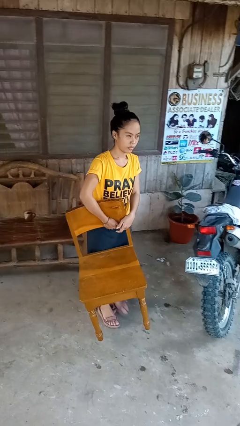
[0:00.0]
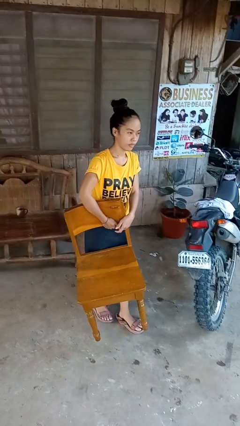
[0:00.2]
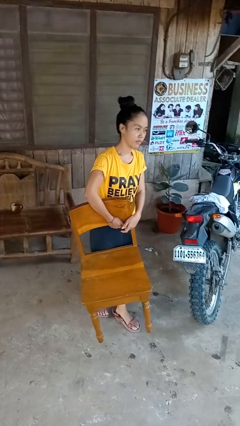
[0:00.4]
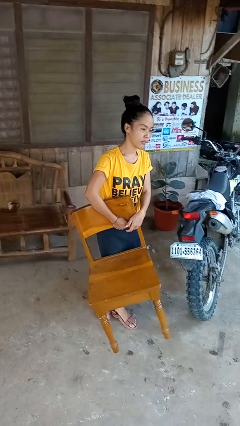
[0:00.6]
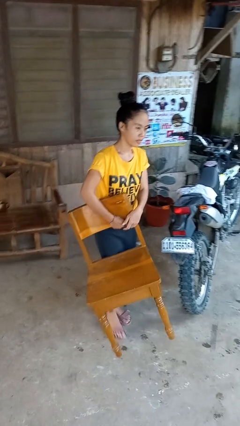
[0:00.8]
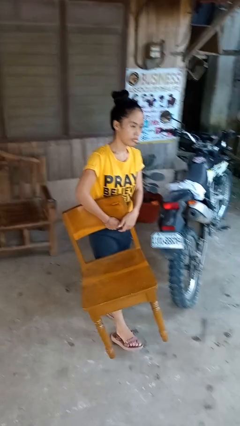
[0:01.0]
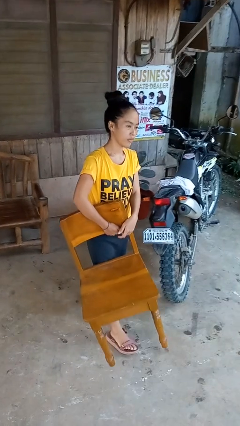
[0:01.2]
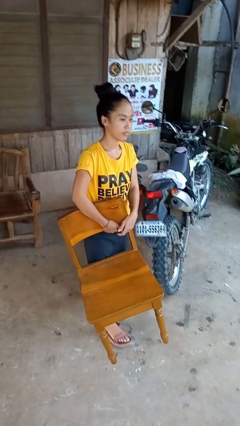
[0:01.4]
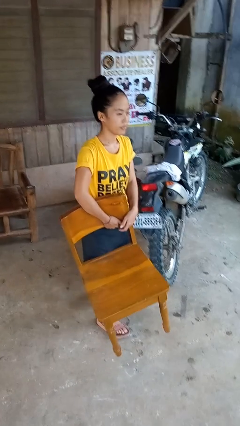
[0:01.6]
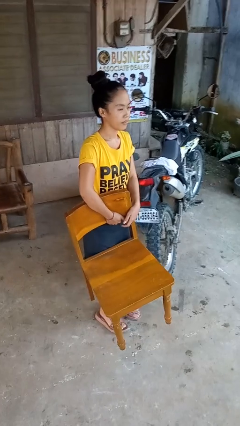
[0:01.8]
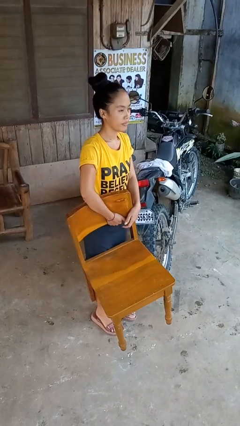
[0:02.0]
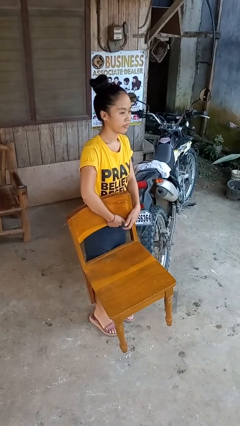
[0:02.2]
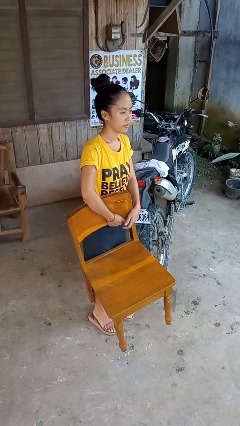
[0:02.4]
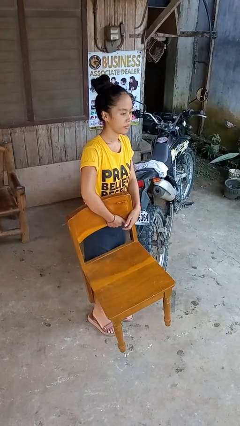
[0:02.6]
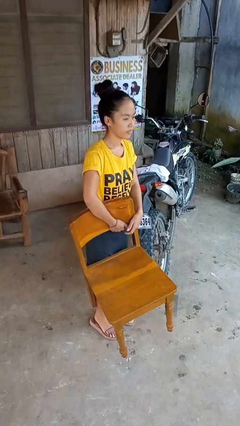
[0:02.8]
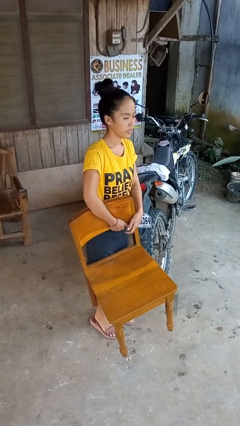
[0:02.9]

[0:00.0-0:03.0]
person carries furniture

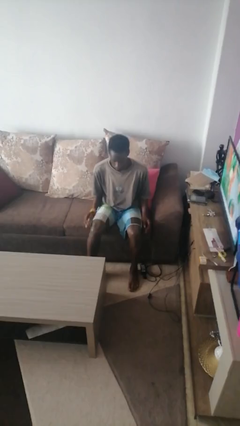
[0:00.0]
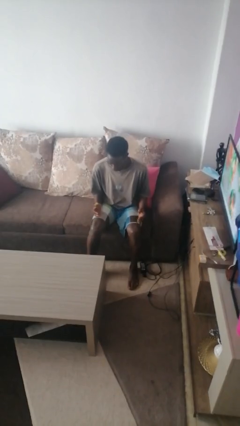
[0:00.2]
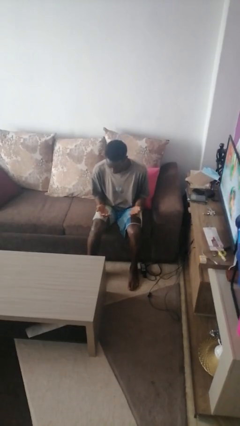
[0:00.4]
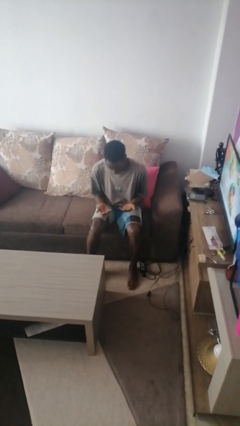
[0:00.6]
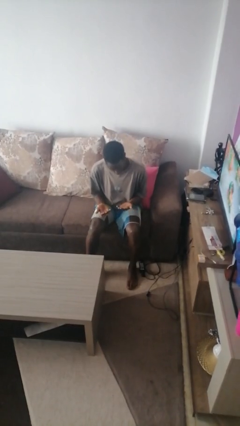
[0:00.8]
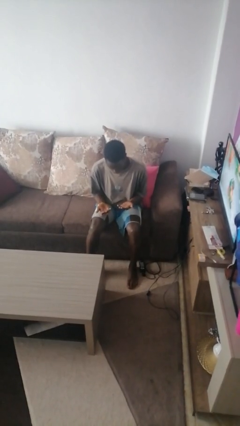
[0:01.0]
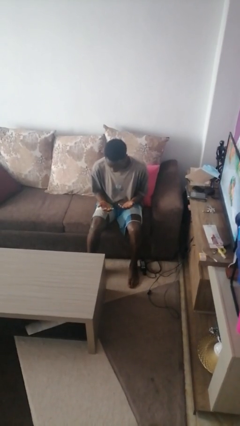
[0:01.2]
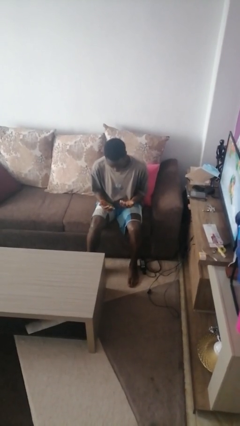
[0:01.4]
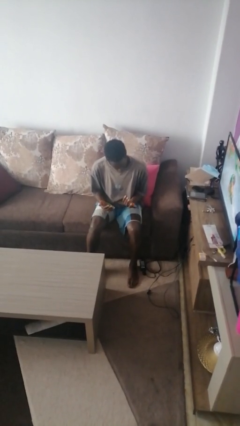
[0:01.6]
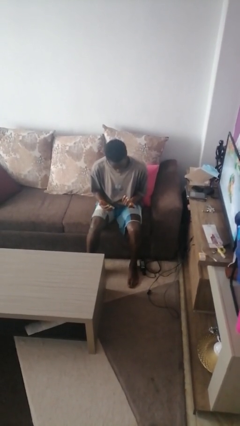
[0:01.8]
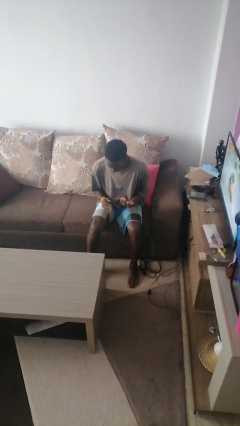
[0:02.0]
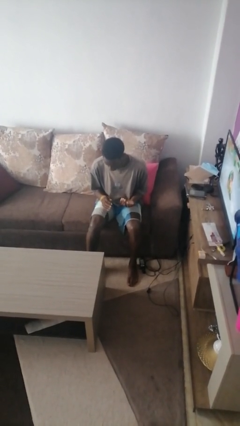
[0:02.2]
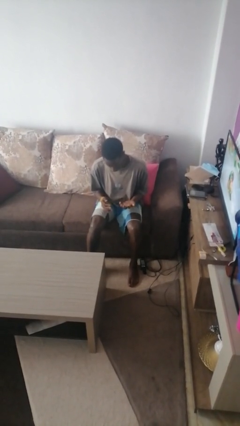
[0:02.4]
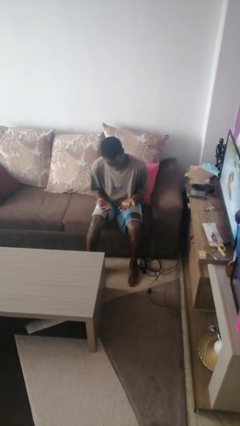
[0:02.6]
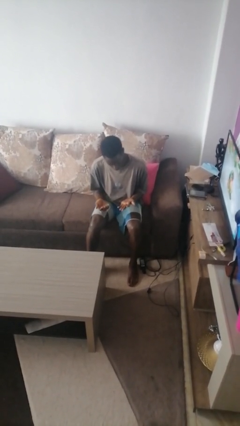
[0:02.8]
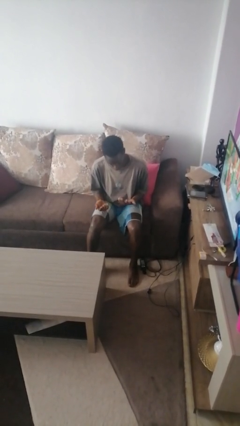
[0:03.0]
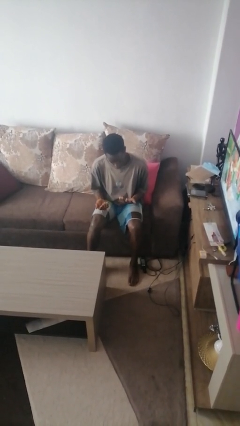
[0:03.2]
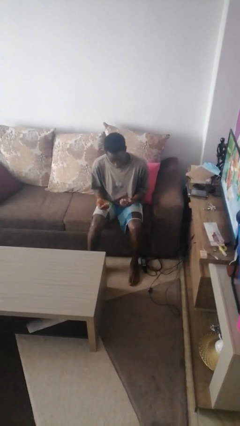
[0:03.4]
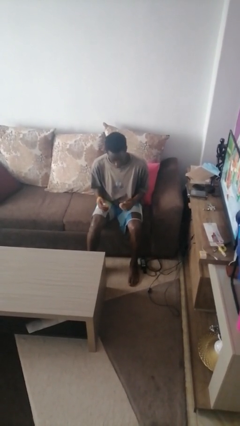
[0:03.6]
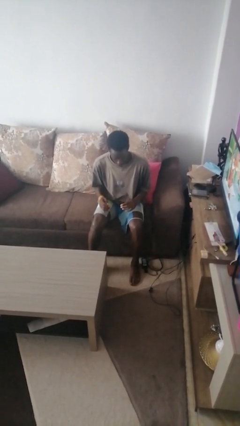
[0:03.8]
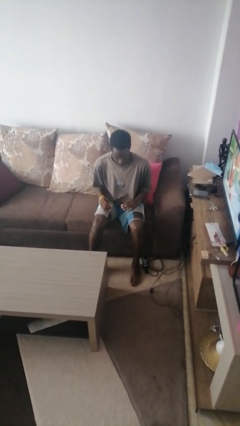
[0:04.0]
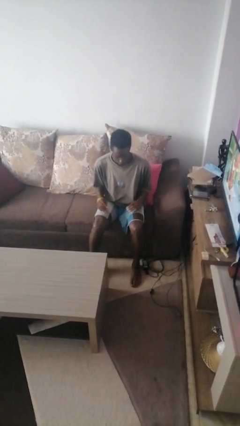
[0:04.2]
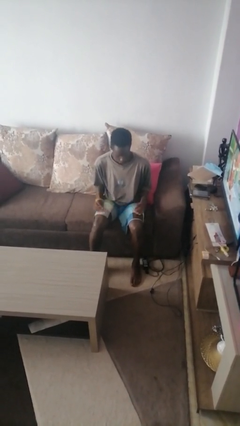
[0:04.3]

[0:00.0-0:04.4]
person looks at hands in lap

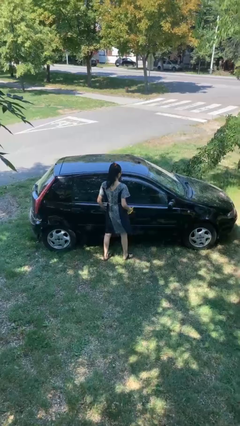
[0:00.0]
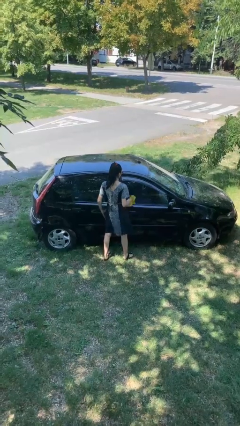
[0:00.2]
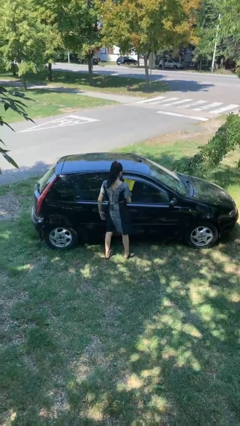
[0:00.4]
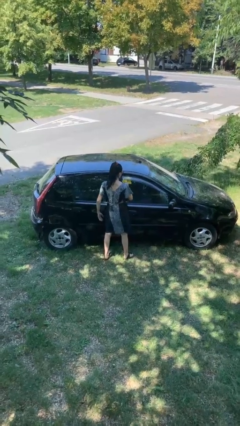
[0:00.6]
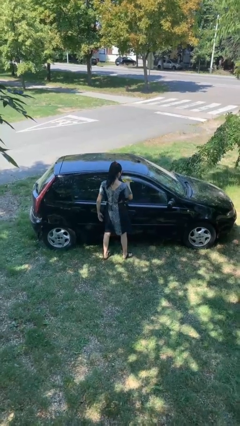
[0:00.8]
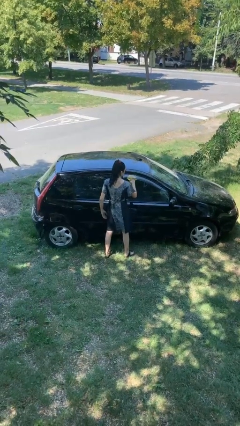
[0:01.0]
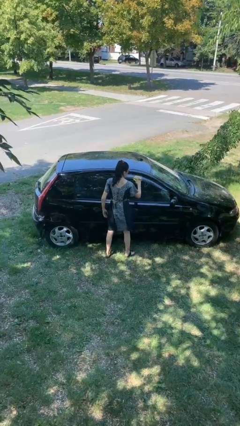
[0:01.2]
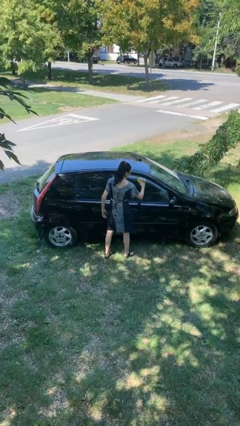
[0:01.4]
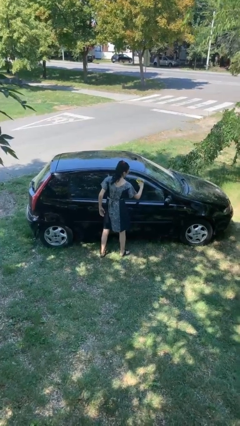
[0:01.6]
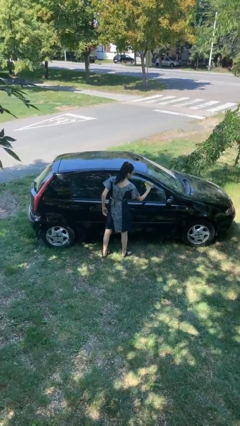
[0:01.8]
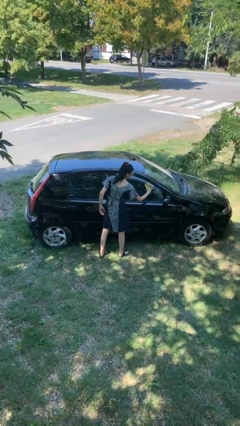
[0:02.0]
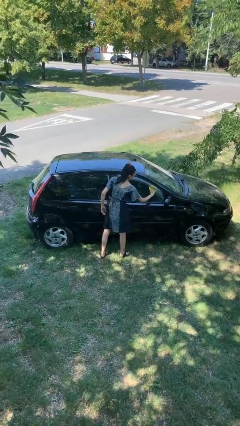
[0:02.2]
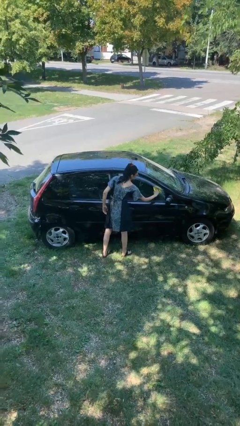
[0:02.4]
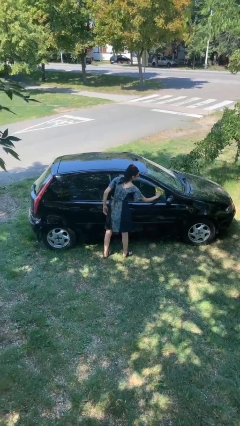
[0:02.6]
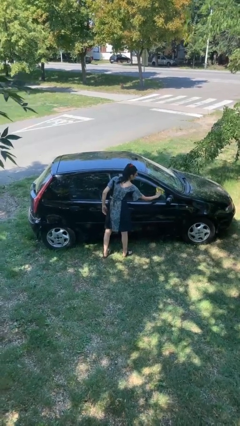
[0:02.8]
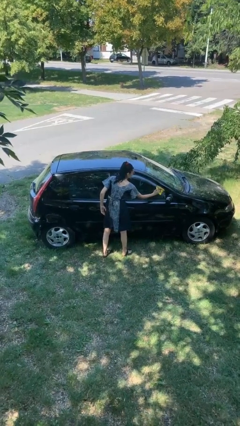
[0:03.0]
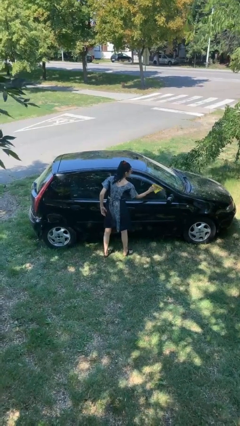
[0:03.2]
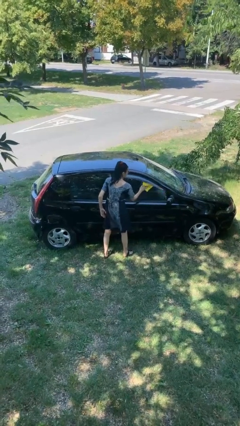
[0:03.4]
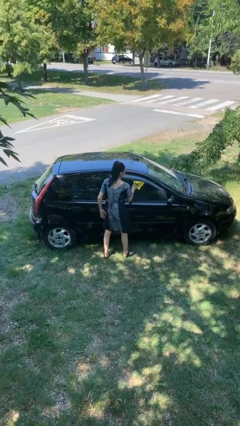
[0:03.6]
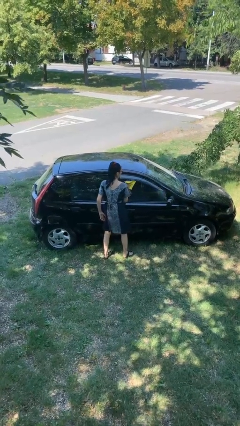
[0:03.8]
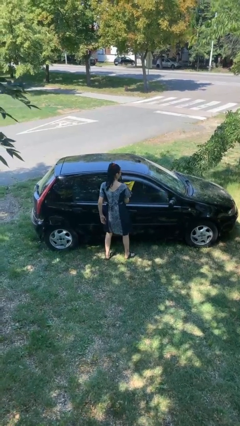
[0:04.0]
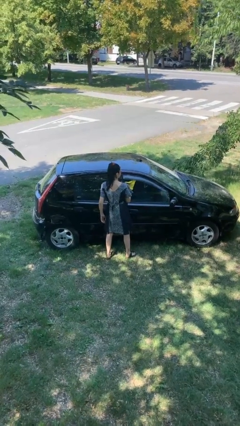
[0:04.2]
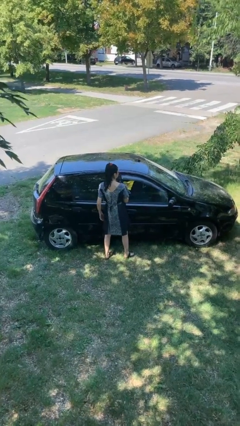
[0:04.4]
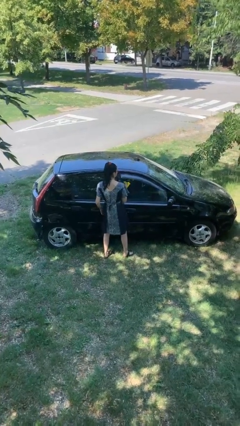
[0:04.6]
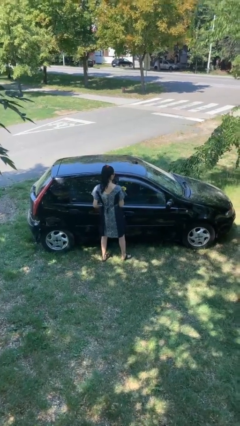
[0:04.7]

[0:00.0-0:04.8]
person polishes car with rag

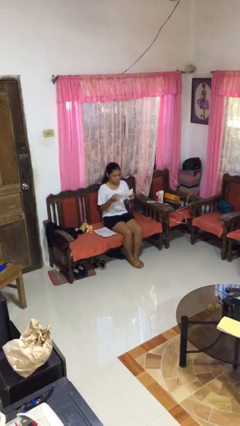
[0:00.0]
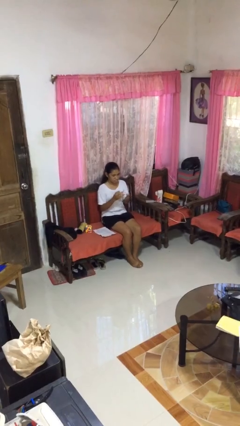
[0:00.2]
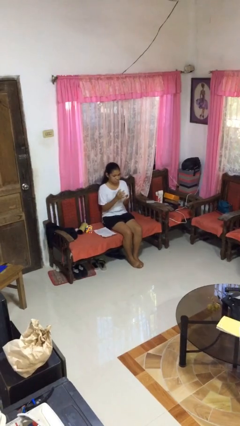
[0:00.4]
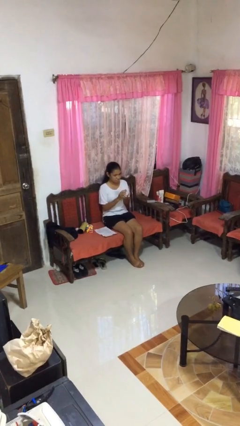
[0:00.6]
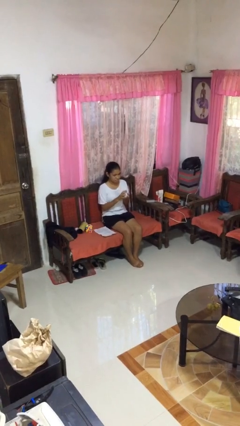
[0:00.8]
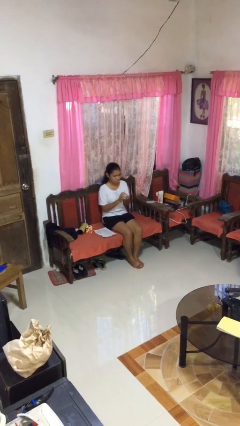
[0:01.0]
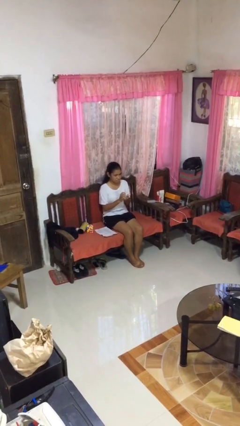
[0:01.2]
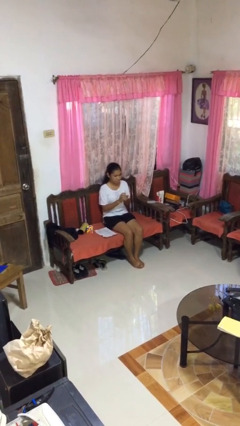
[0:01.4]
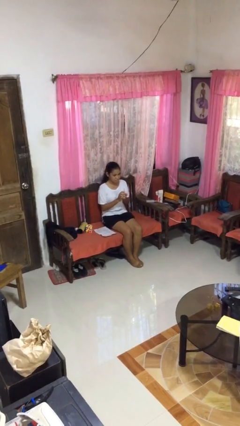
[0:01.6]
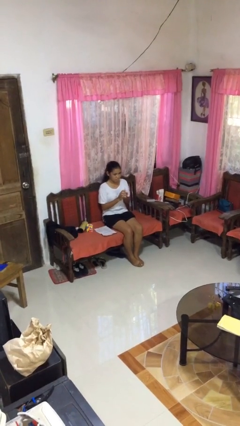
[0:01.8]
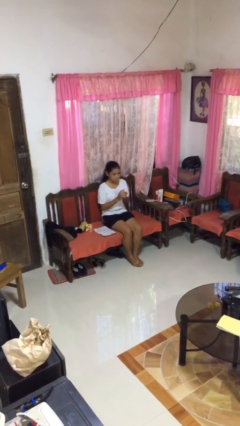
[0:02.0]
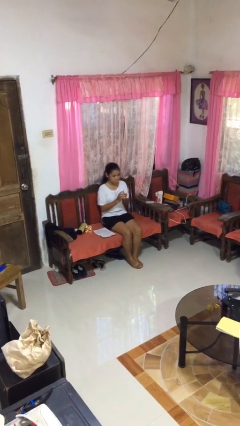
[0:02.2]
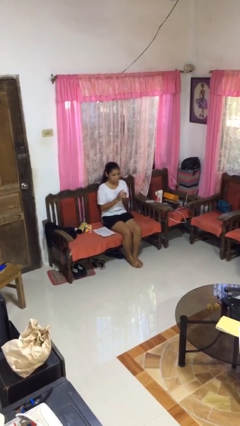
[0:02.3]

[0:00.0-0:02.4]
person crumples paper

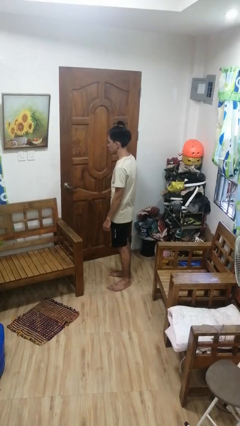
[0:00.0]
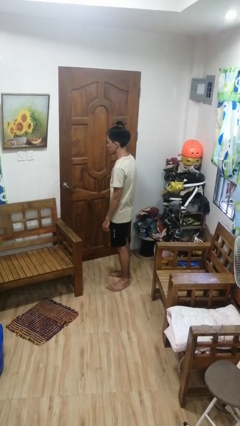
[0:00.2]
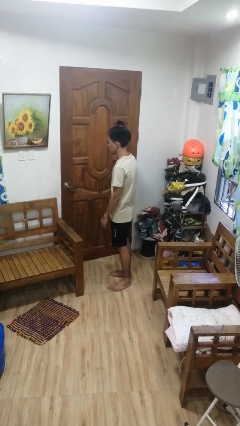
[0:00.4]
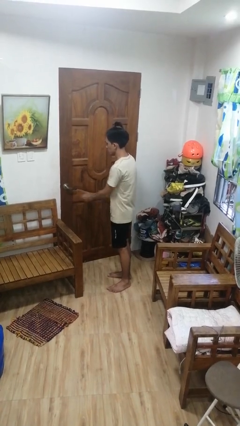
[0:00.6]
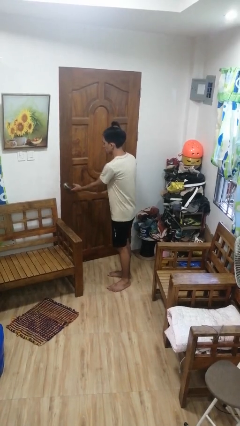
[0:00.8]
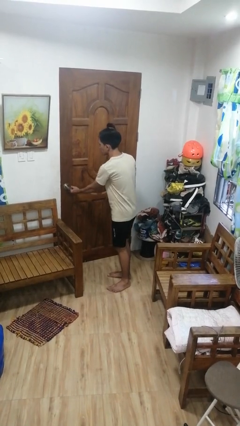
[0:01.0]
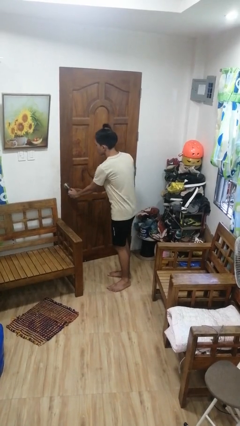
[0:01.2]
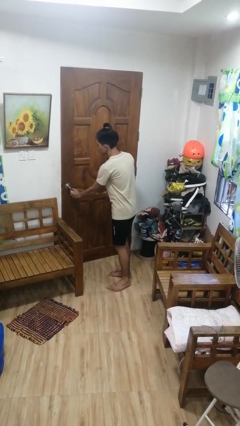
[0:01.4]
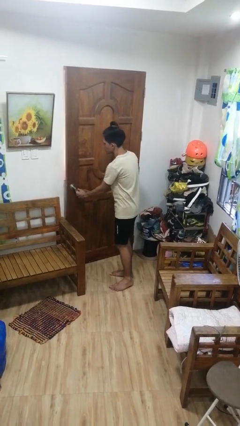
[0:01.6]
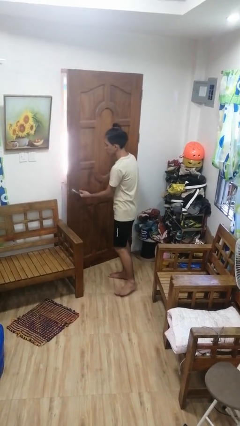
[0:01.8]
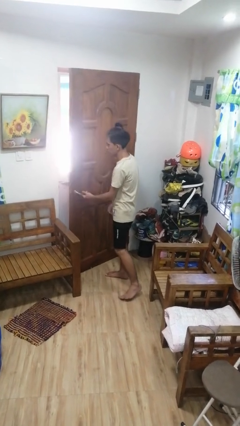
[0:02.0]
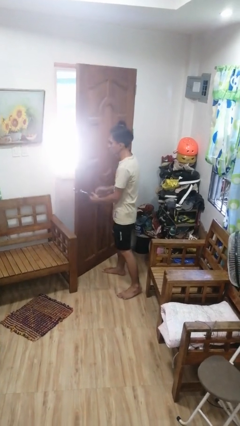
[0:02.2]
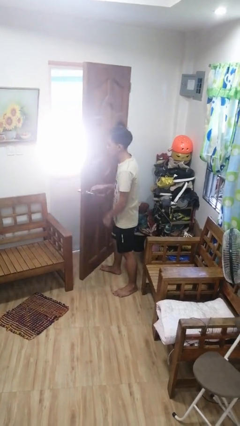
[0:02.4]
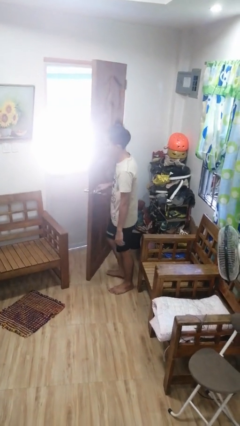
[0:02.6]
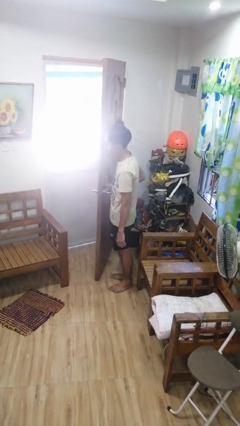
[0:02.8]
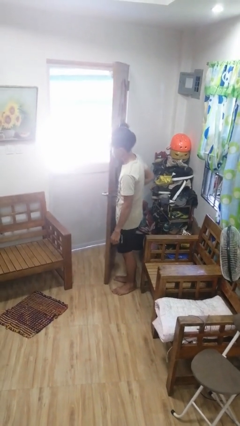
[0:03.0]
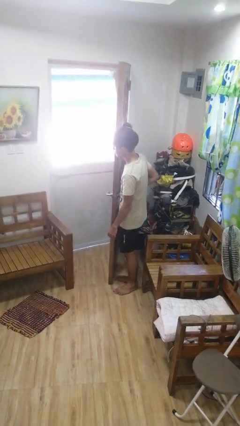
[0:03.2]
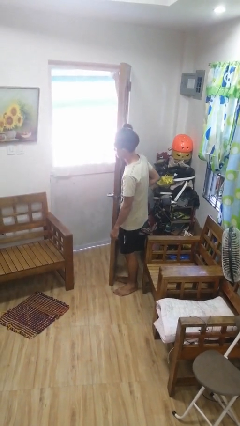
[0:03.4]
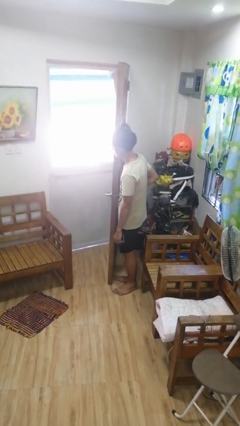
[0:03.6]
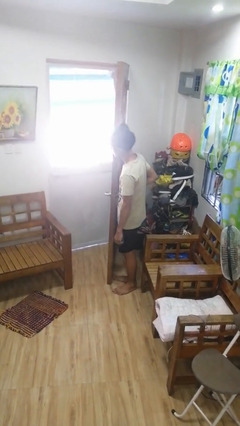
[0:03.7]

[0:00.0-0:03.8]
person opens facility door
